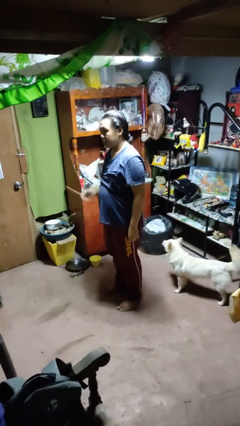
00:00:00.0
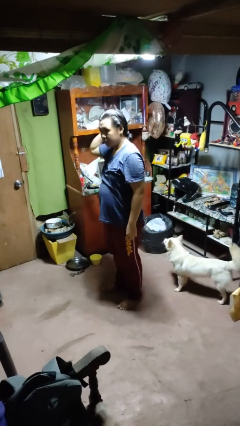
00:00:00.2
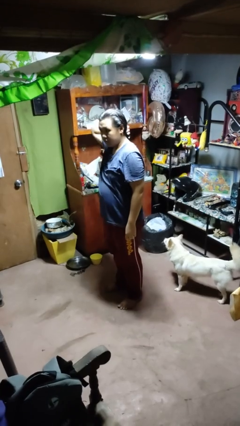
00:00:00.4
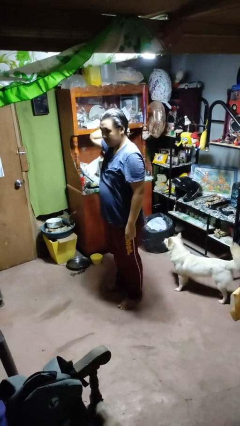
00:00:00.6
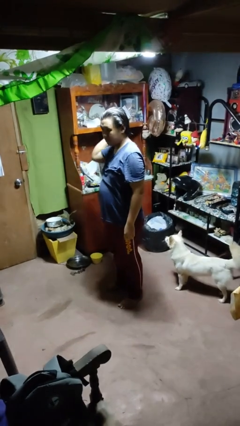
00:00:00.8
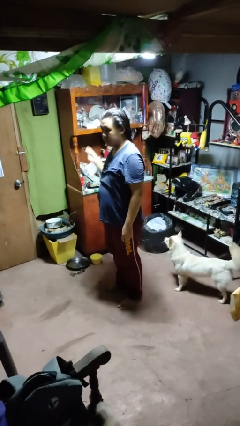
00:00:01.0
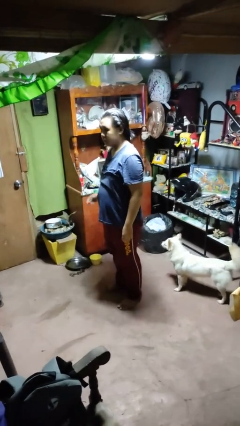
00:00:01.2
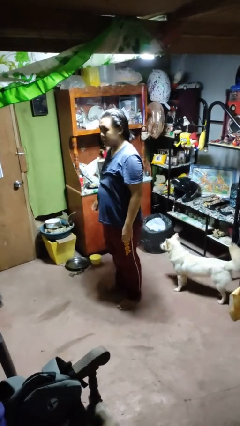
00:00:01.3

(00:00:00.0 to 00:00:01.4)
person takes off hairtie

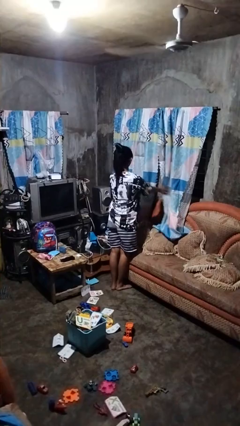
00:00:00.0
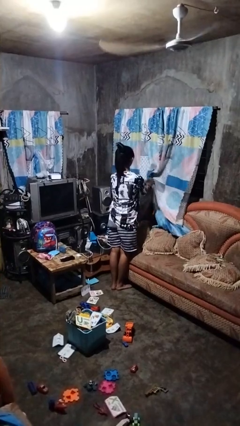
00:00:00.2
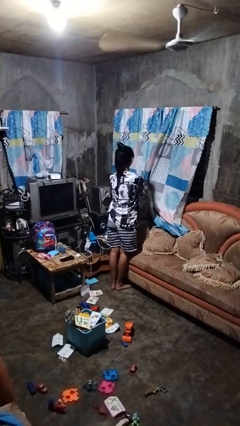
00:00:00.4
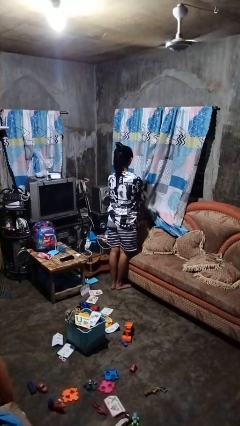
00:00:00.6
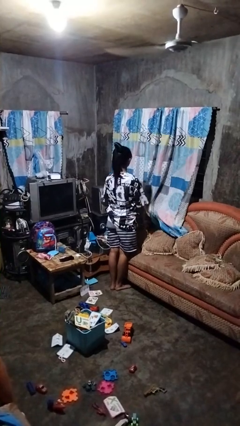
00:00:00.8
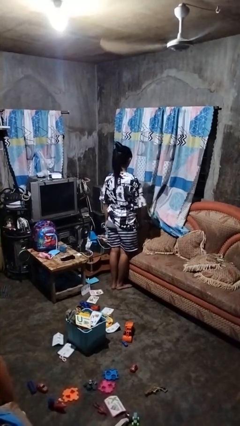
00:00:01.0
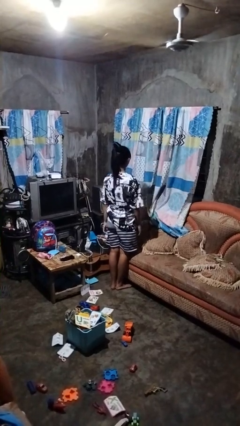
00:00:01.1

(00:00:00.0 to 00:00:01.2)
person closes curtains

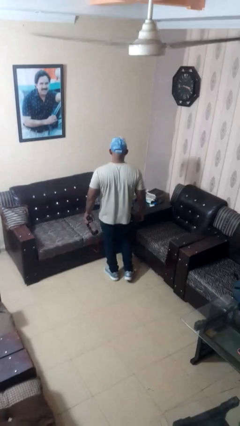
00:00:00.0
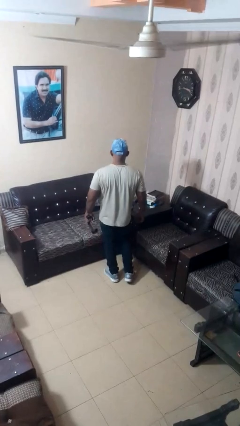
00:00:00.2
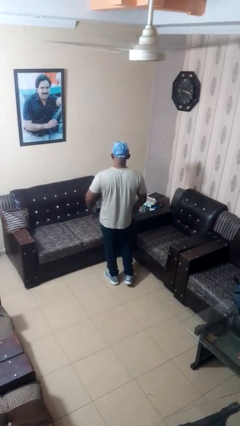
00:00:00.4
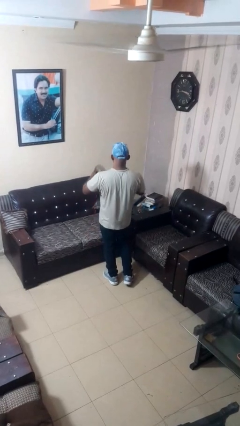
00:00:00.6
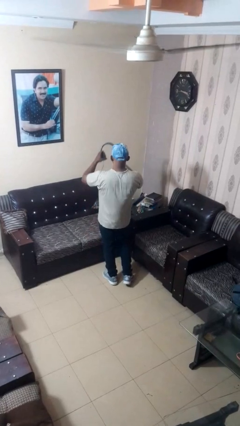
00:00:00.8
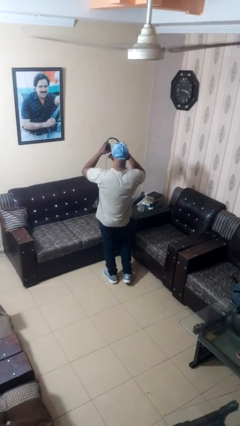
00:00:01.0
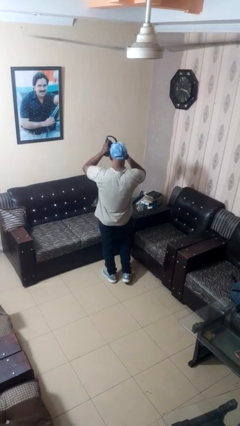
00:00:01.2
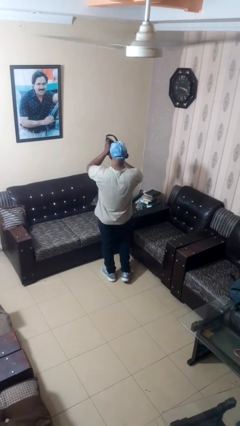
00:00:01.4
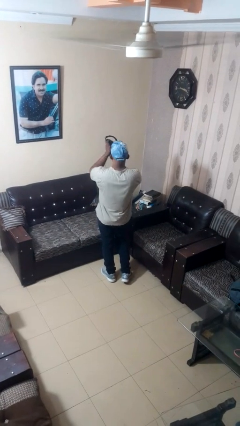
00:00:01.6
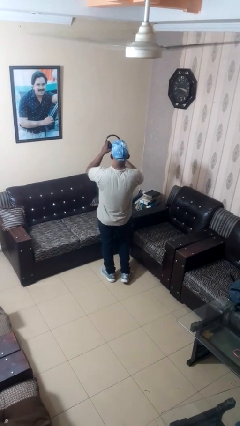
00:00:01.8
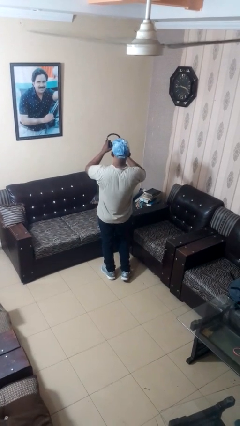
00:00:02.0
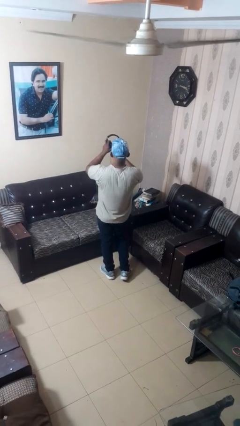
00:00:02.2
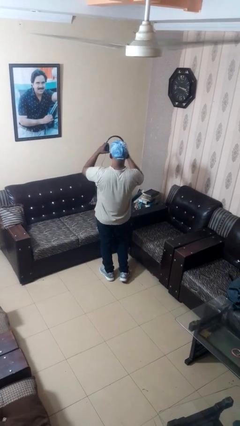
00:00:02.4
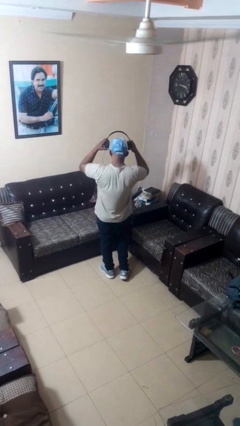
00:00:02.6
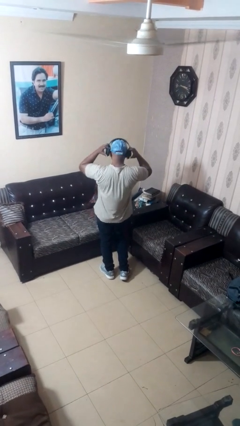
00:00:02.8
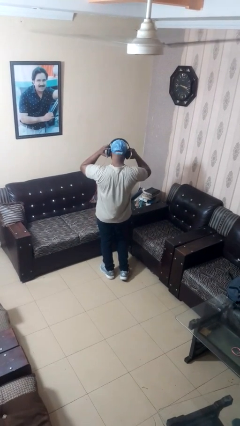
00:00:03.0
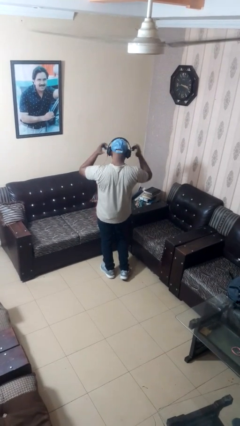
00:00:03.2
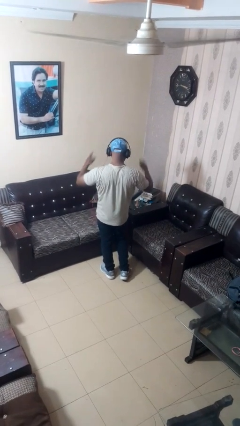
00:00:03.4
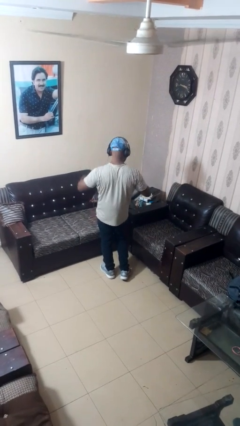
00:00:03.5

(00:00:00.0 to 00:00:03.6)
person puts on headphones

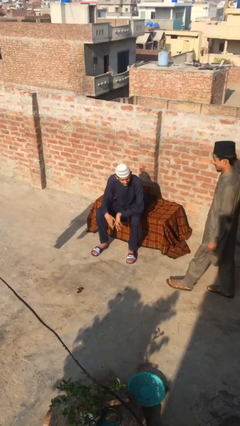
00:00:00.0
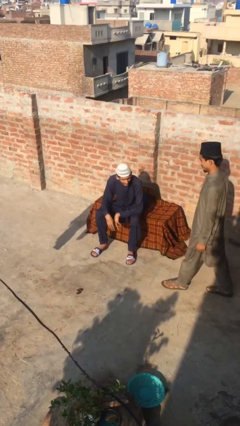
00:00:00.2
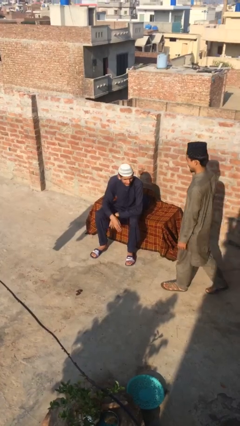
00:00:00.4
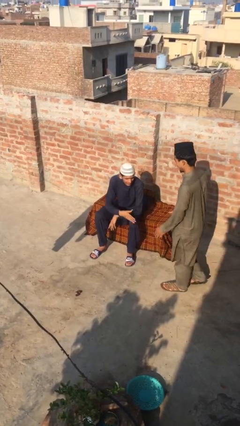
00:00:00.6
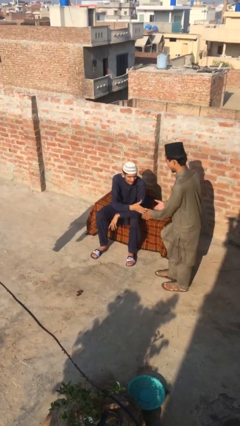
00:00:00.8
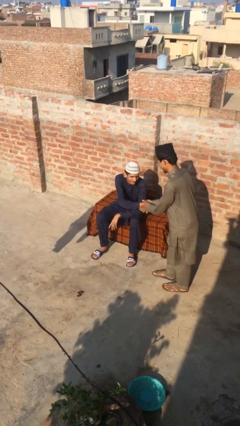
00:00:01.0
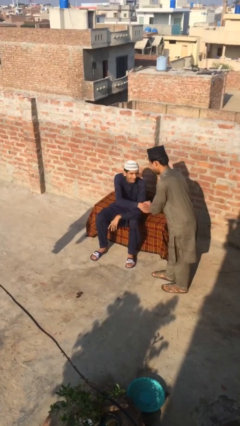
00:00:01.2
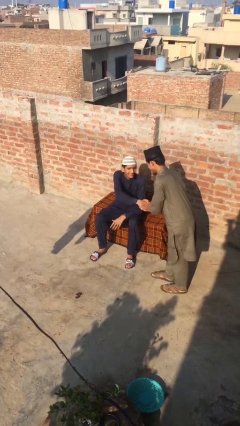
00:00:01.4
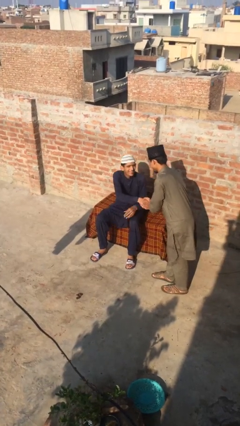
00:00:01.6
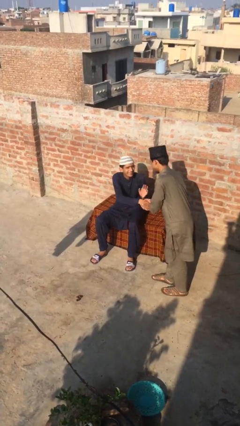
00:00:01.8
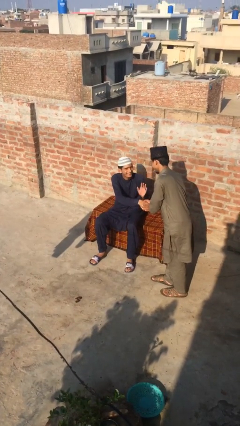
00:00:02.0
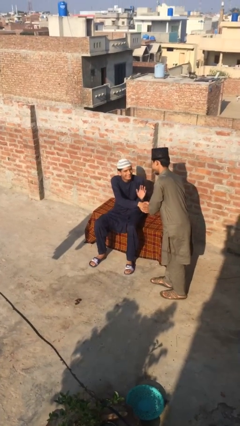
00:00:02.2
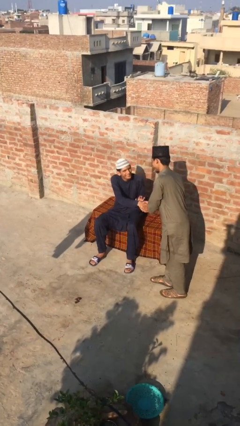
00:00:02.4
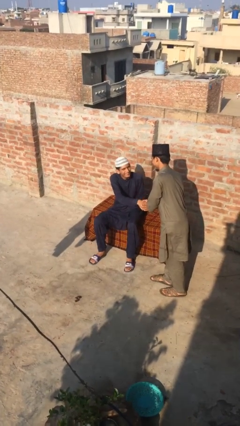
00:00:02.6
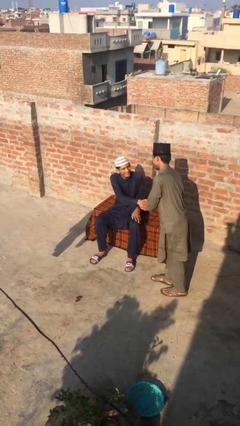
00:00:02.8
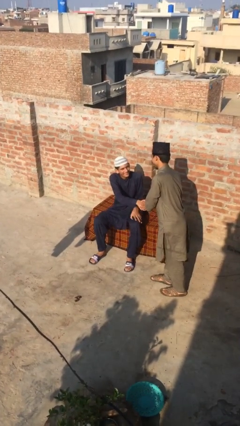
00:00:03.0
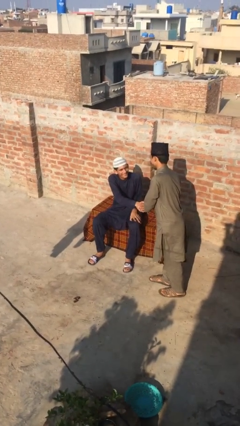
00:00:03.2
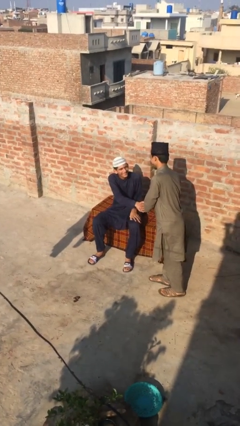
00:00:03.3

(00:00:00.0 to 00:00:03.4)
person shakes hand

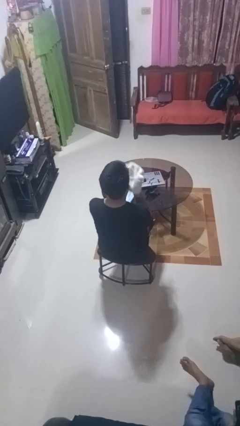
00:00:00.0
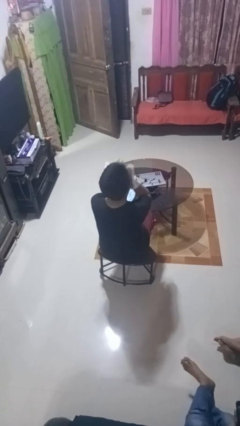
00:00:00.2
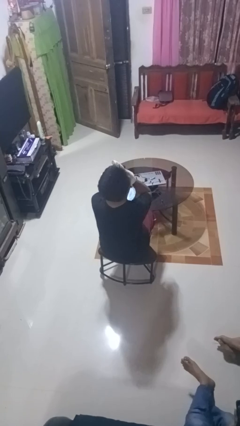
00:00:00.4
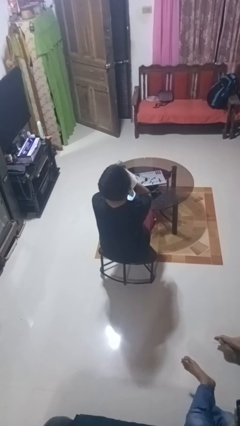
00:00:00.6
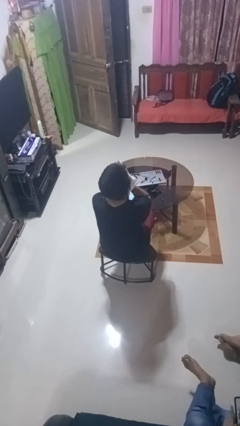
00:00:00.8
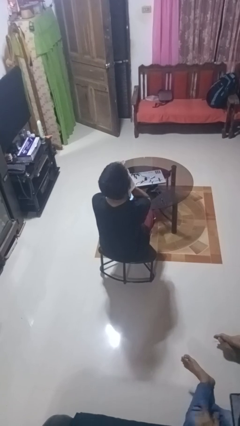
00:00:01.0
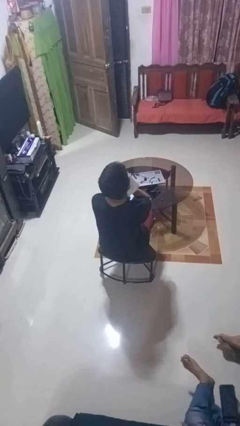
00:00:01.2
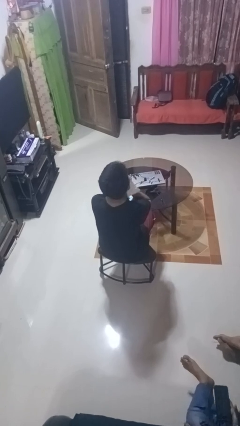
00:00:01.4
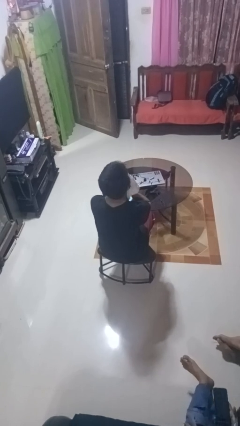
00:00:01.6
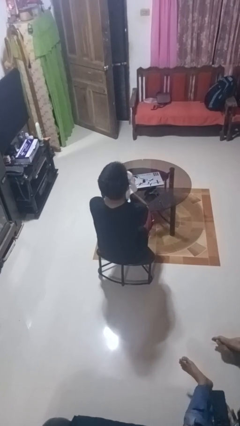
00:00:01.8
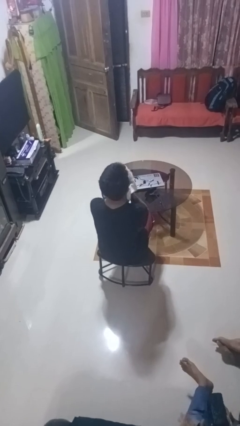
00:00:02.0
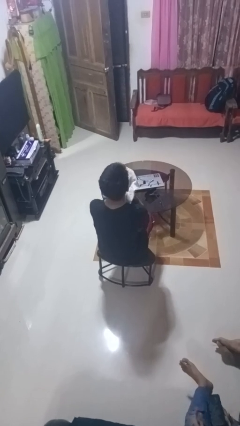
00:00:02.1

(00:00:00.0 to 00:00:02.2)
person wipes mouth with napkin

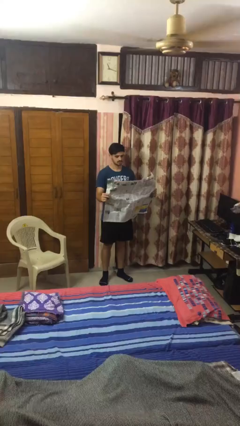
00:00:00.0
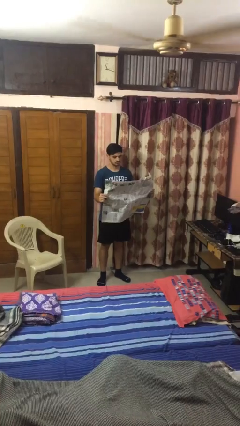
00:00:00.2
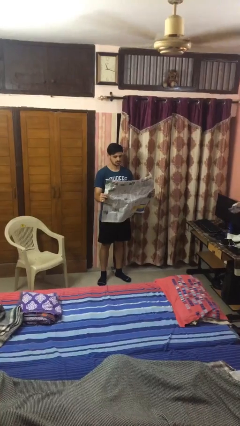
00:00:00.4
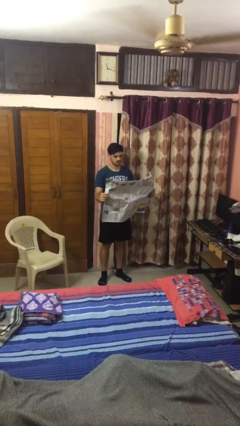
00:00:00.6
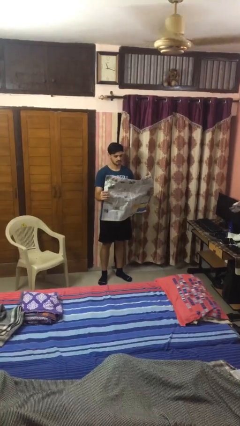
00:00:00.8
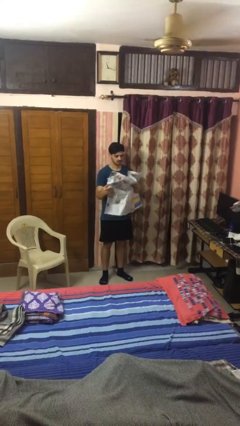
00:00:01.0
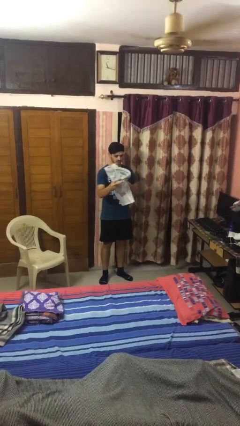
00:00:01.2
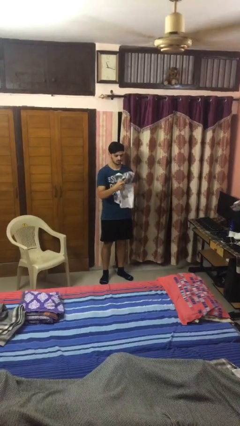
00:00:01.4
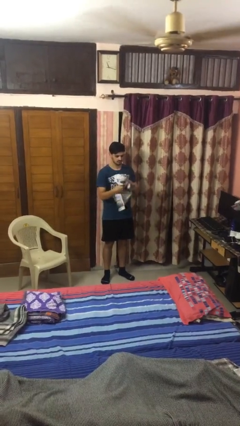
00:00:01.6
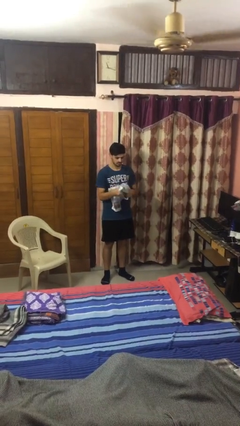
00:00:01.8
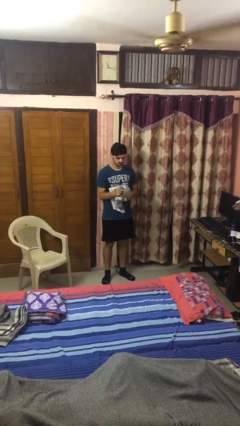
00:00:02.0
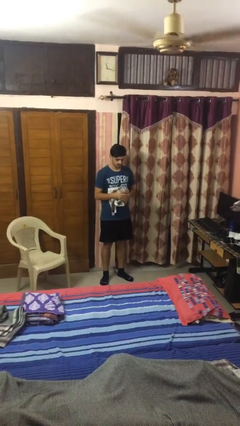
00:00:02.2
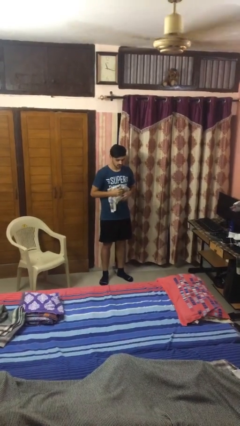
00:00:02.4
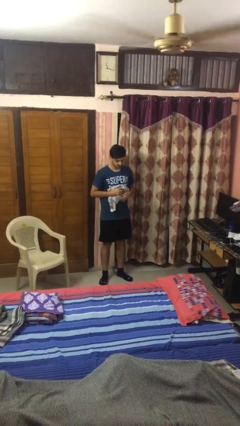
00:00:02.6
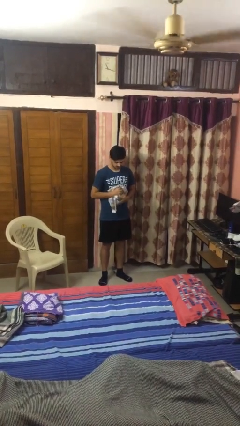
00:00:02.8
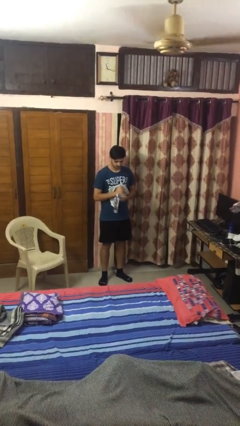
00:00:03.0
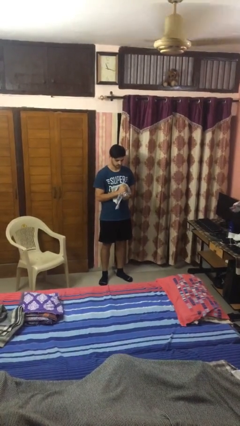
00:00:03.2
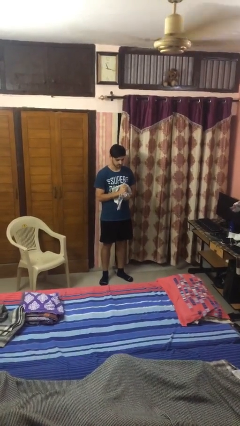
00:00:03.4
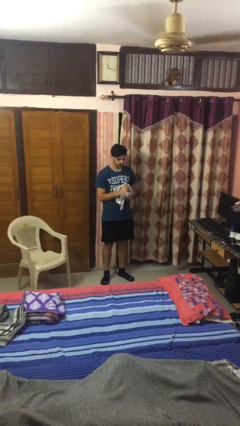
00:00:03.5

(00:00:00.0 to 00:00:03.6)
person crumples paper

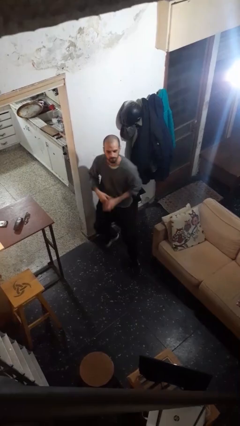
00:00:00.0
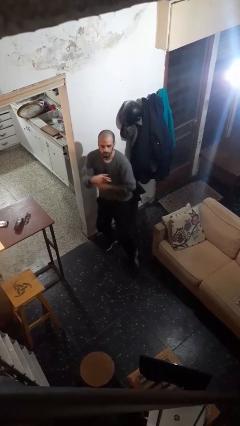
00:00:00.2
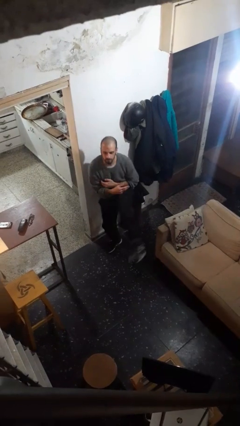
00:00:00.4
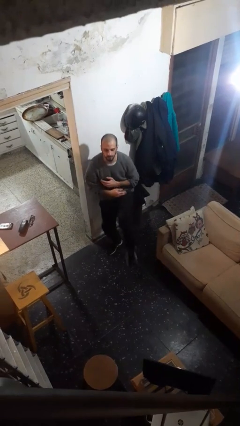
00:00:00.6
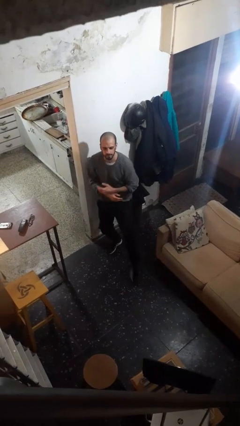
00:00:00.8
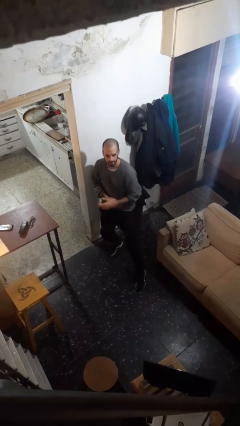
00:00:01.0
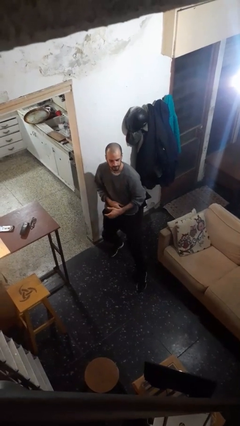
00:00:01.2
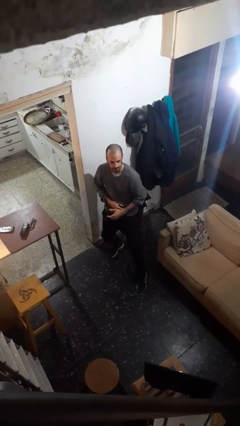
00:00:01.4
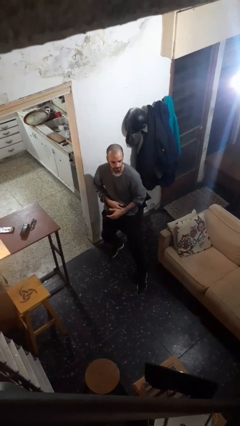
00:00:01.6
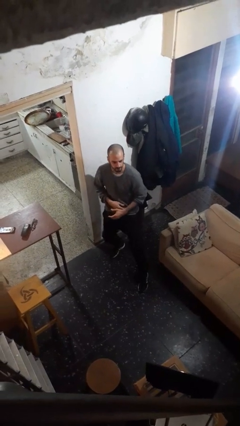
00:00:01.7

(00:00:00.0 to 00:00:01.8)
person karate kicks
